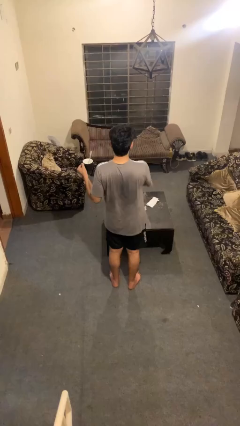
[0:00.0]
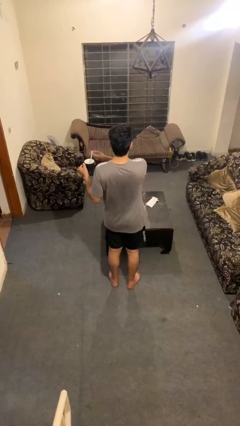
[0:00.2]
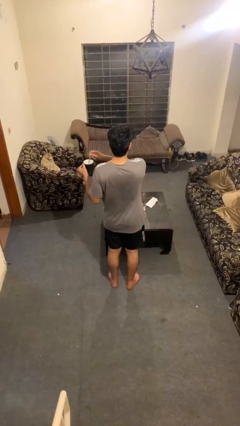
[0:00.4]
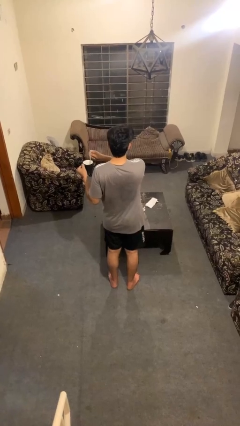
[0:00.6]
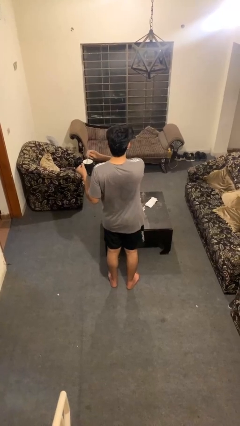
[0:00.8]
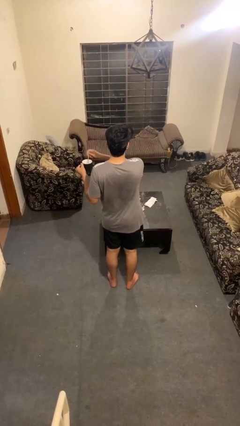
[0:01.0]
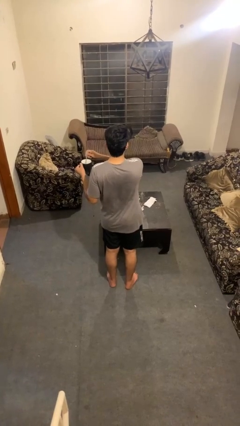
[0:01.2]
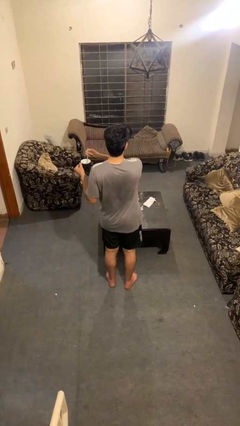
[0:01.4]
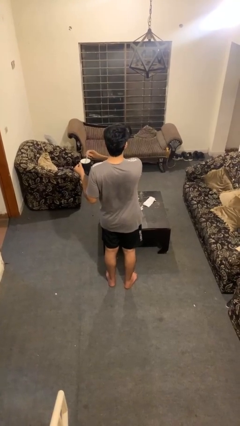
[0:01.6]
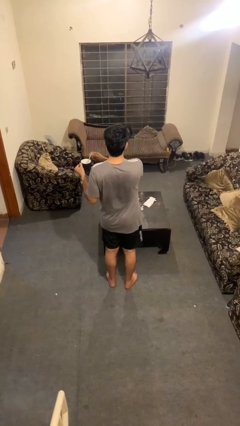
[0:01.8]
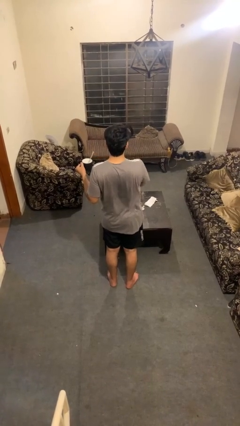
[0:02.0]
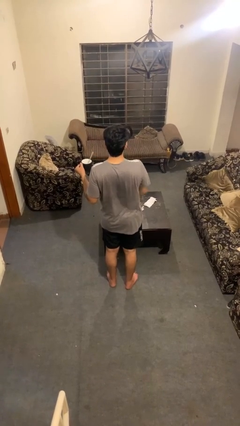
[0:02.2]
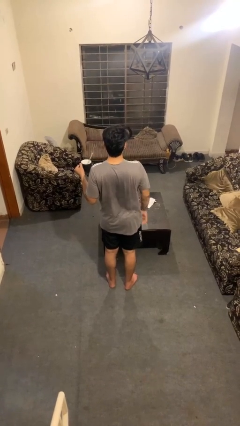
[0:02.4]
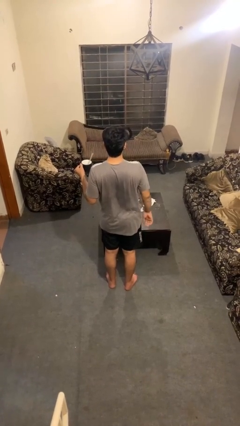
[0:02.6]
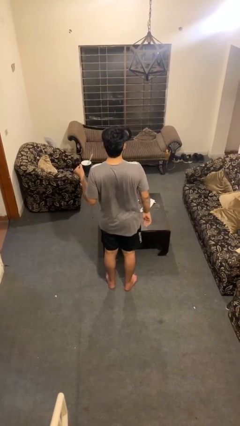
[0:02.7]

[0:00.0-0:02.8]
person stirs mug

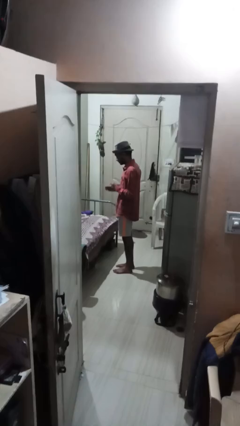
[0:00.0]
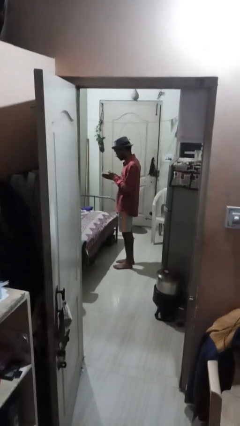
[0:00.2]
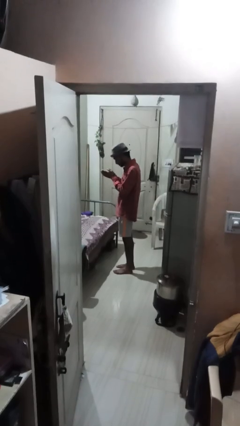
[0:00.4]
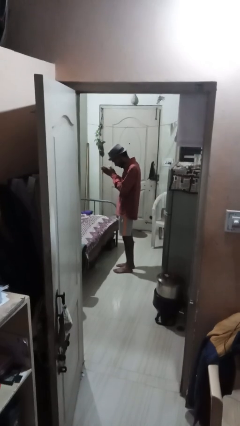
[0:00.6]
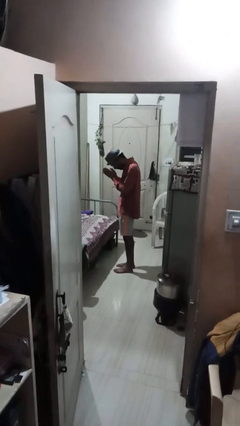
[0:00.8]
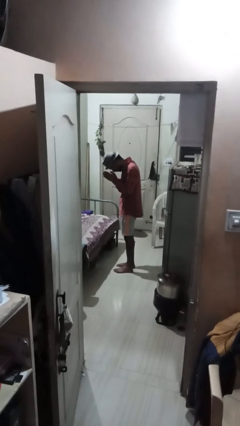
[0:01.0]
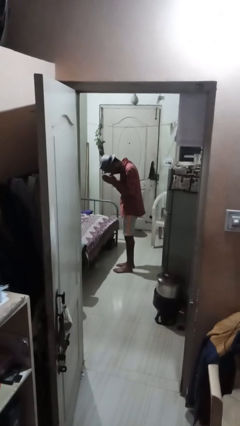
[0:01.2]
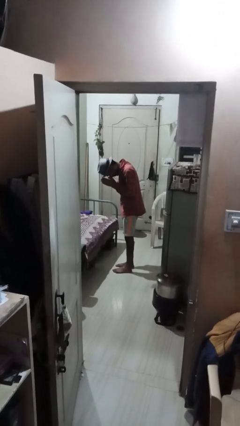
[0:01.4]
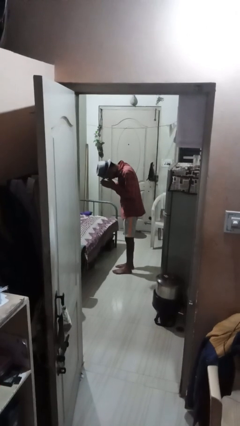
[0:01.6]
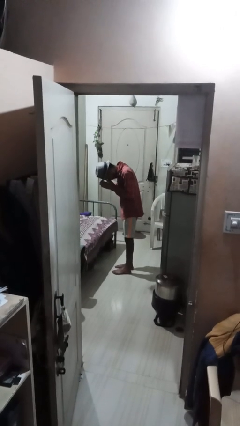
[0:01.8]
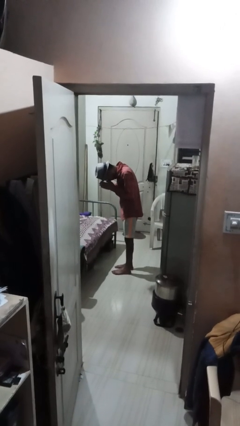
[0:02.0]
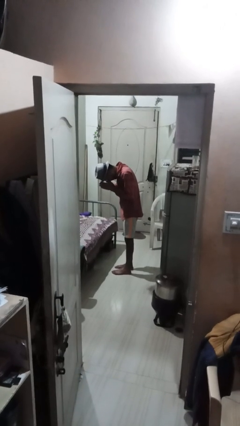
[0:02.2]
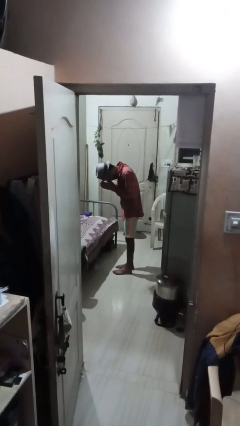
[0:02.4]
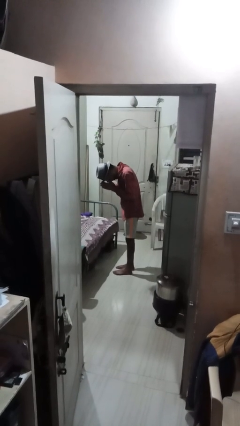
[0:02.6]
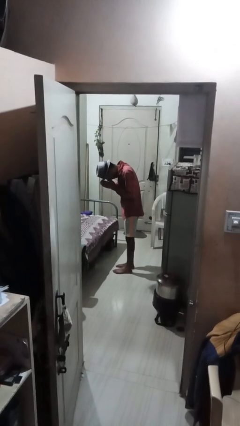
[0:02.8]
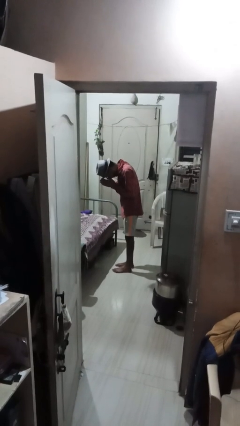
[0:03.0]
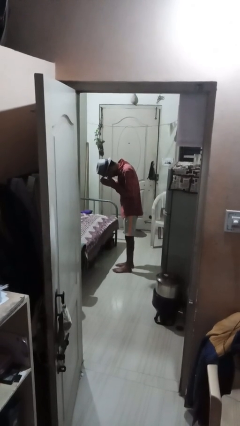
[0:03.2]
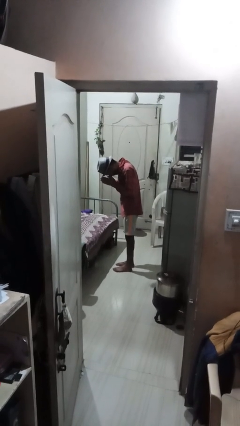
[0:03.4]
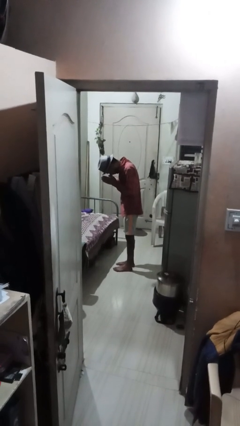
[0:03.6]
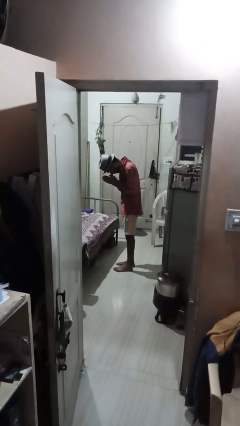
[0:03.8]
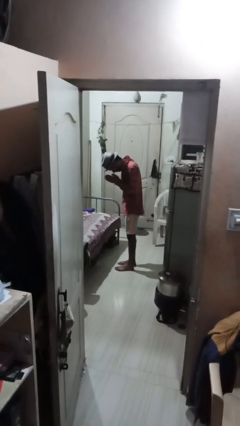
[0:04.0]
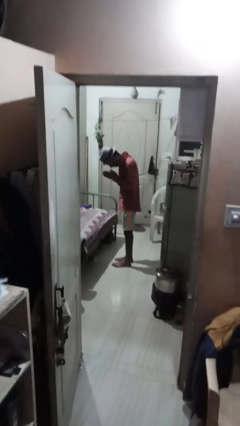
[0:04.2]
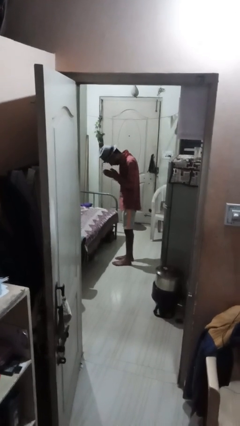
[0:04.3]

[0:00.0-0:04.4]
person prays

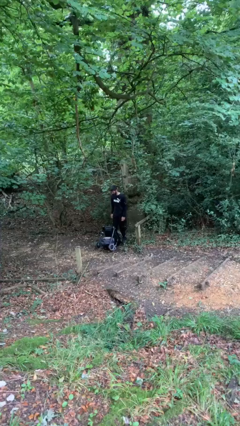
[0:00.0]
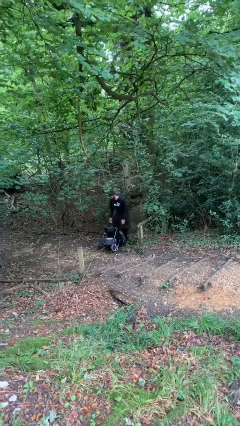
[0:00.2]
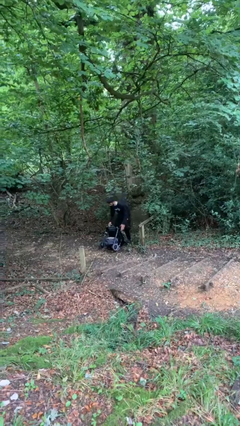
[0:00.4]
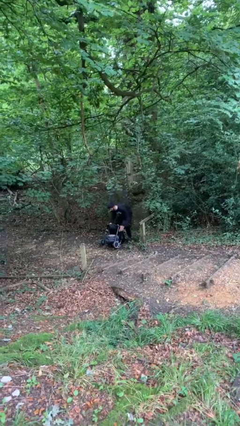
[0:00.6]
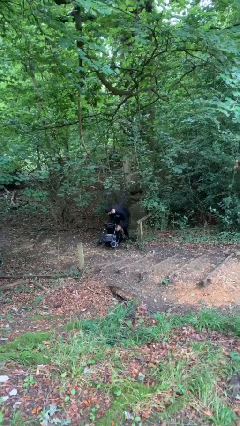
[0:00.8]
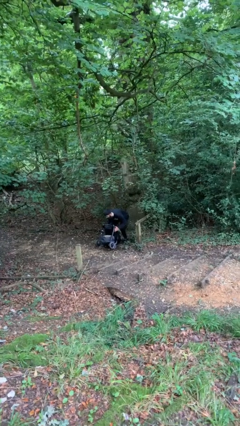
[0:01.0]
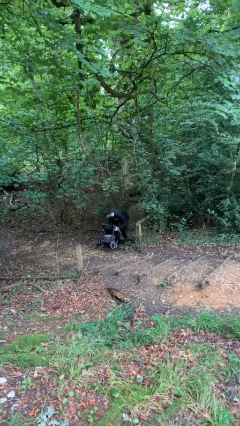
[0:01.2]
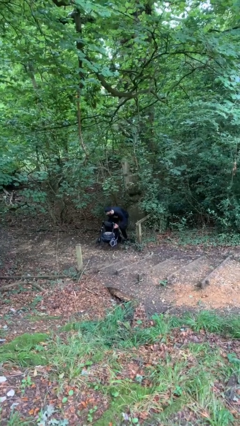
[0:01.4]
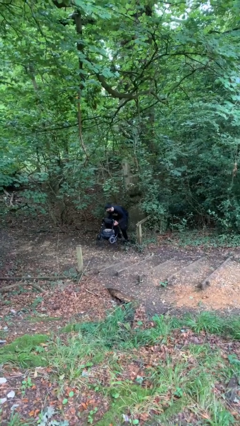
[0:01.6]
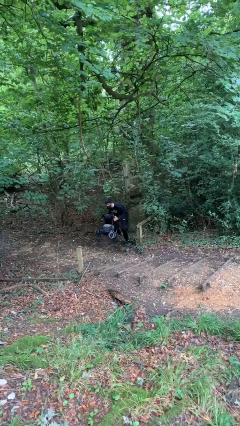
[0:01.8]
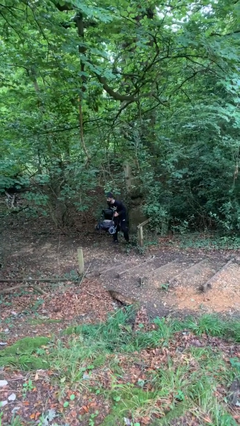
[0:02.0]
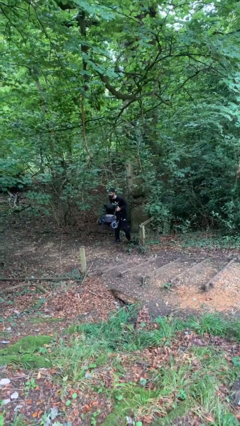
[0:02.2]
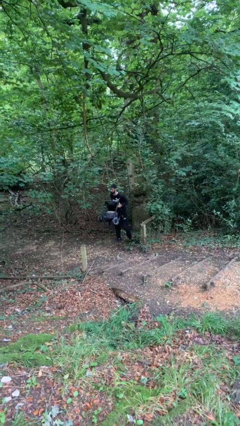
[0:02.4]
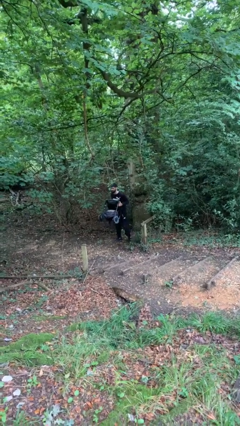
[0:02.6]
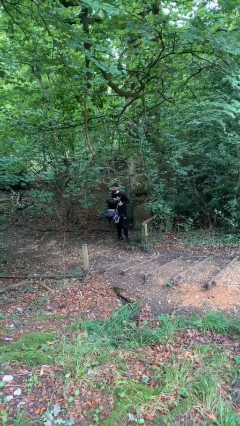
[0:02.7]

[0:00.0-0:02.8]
person picks up object from floor

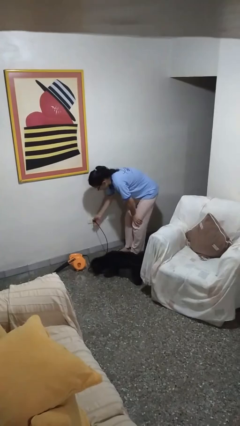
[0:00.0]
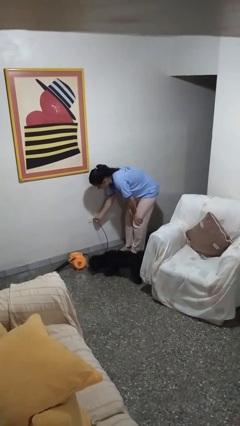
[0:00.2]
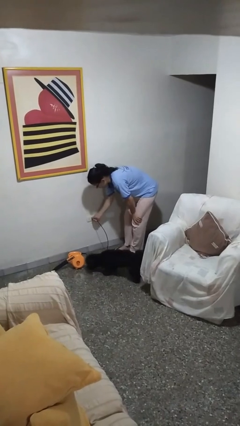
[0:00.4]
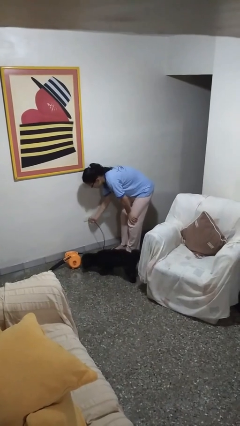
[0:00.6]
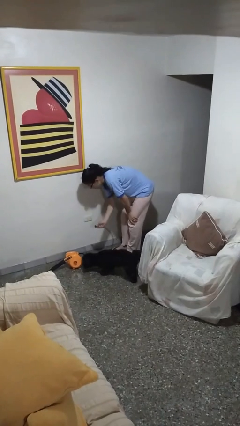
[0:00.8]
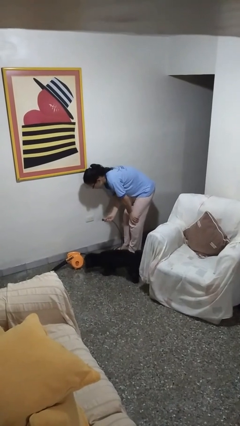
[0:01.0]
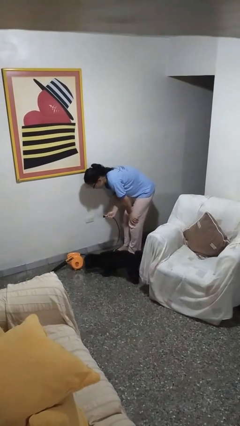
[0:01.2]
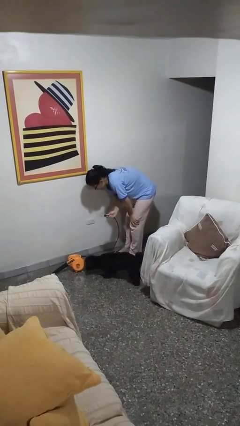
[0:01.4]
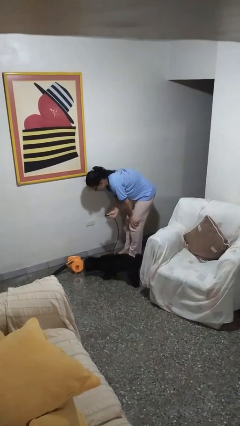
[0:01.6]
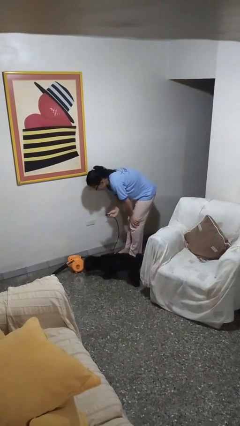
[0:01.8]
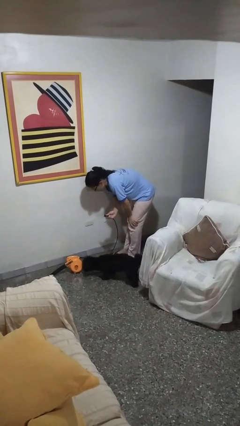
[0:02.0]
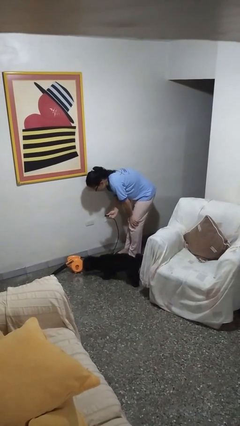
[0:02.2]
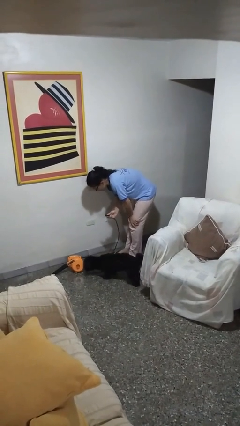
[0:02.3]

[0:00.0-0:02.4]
person unplugs from electrical socket

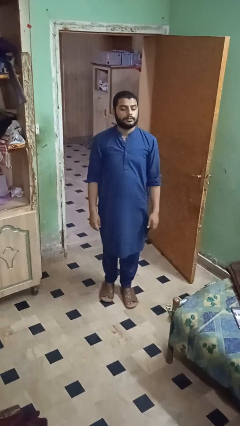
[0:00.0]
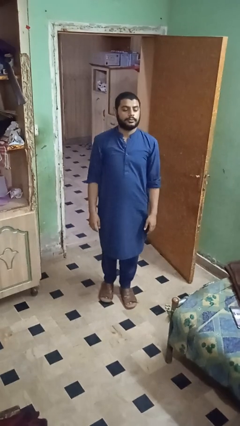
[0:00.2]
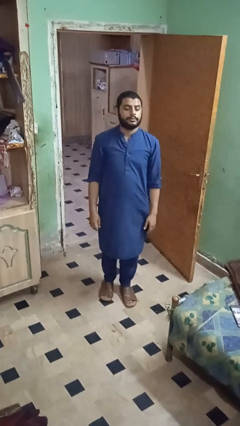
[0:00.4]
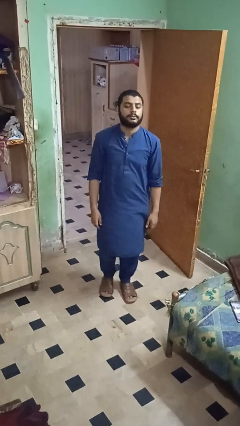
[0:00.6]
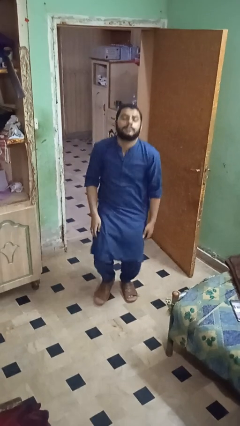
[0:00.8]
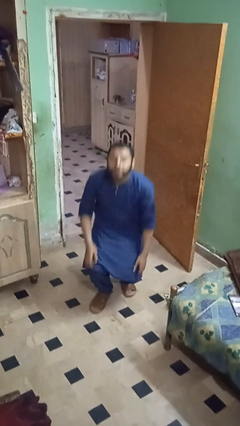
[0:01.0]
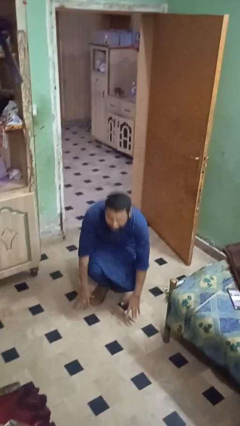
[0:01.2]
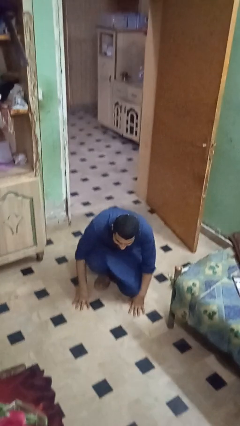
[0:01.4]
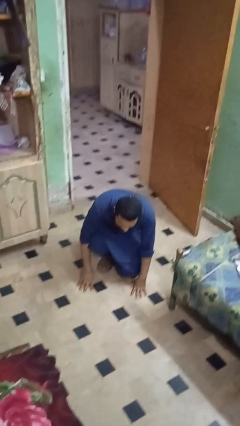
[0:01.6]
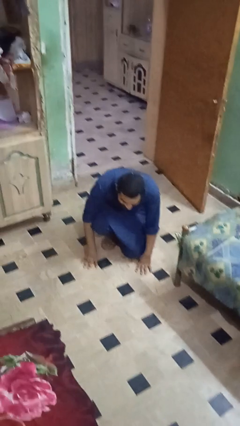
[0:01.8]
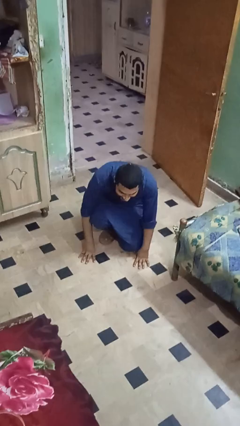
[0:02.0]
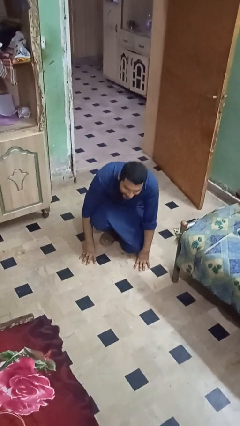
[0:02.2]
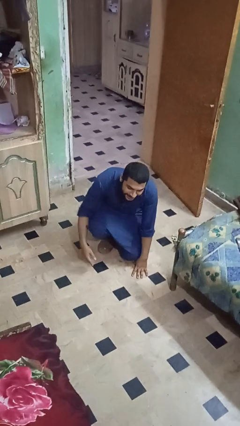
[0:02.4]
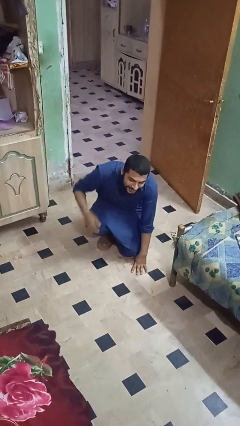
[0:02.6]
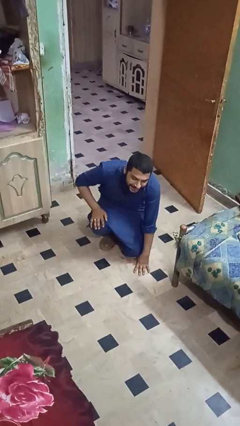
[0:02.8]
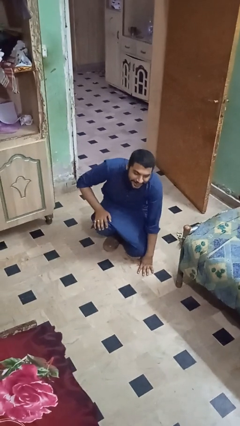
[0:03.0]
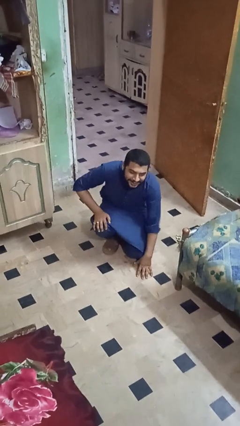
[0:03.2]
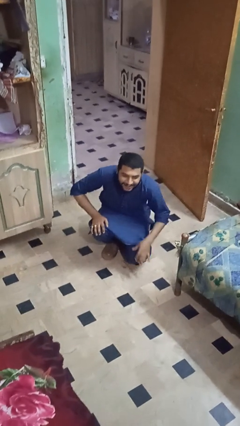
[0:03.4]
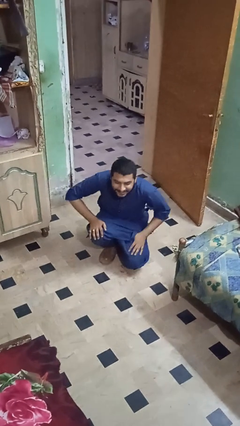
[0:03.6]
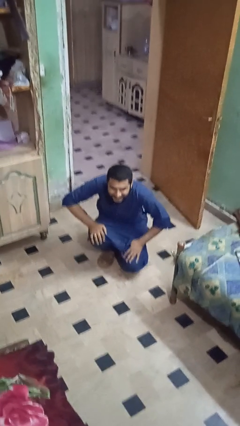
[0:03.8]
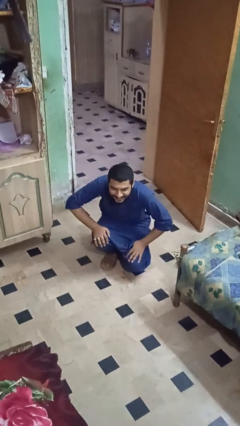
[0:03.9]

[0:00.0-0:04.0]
person trips on object on floor

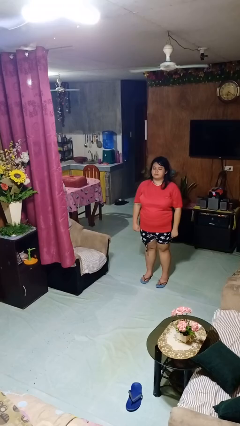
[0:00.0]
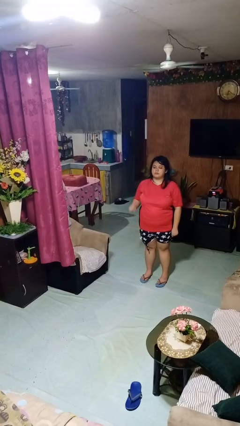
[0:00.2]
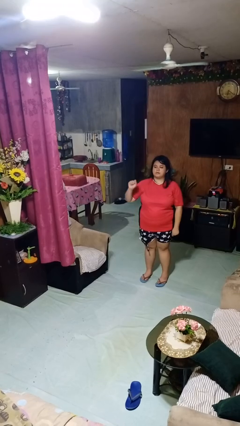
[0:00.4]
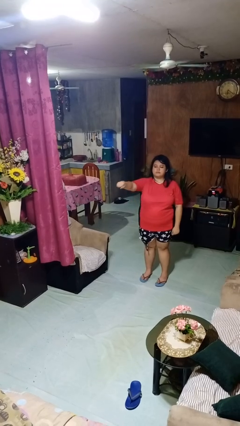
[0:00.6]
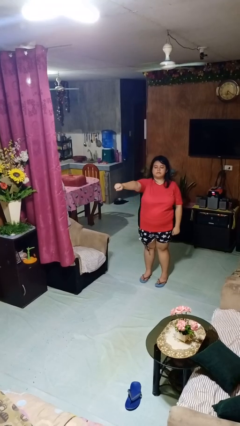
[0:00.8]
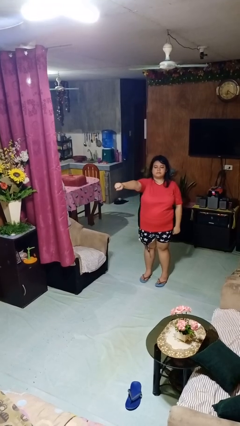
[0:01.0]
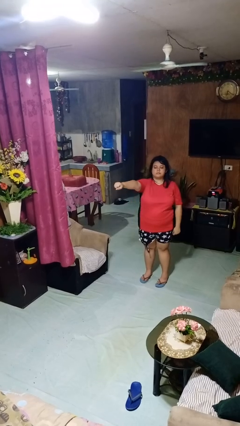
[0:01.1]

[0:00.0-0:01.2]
person punches
